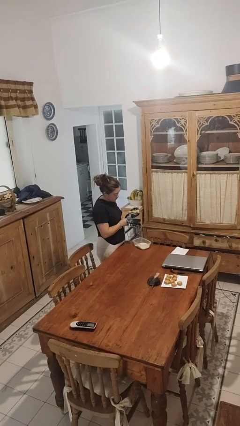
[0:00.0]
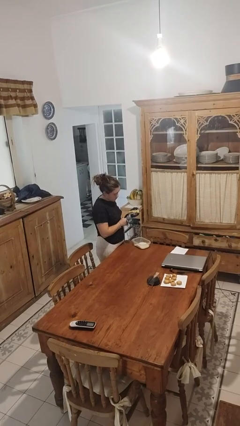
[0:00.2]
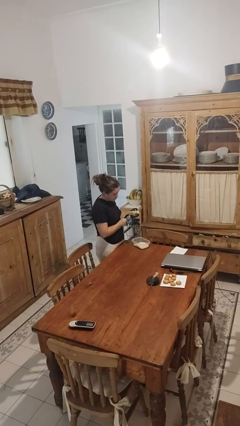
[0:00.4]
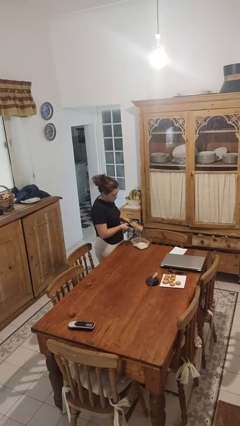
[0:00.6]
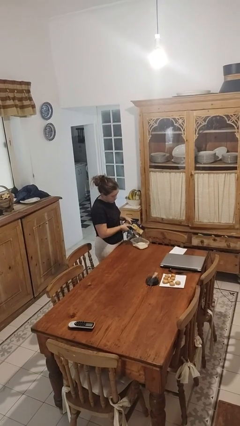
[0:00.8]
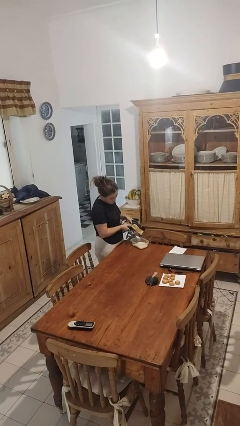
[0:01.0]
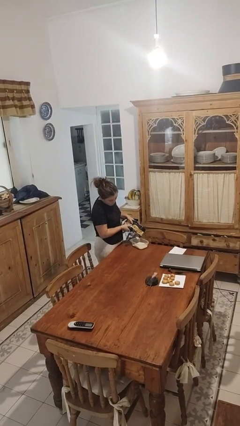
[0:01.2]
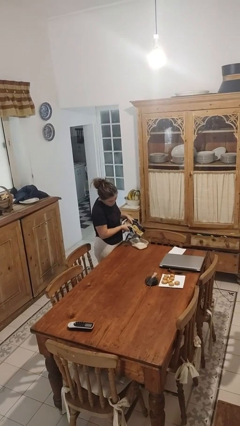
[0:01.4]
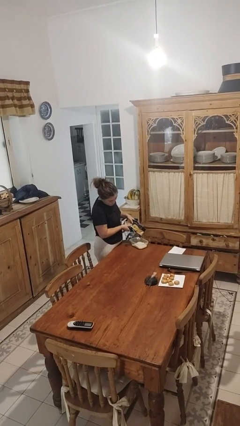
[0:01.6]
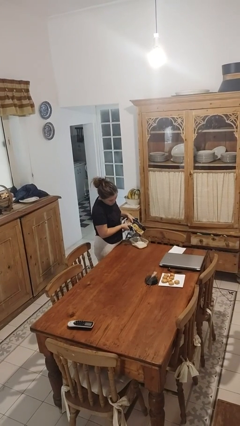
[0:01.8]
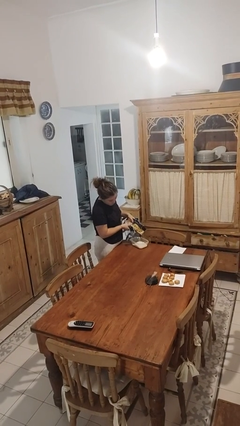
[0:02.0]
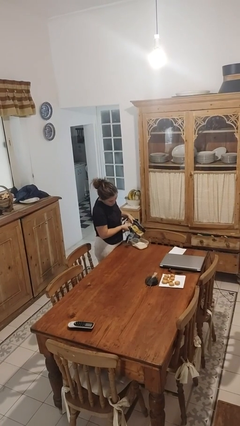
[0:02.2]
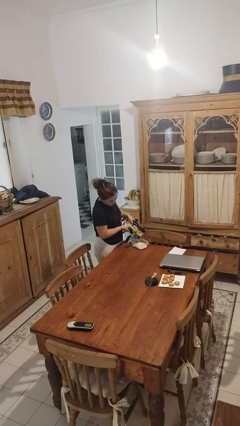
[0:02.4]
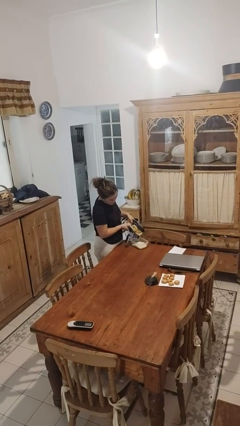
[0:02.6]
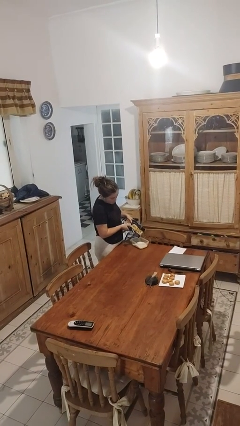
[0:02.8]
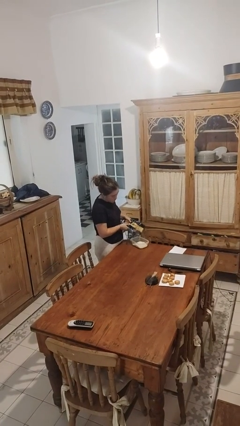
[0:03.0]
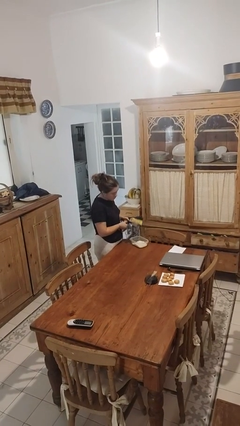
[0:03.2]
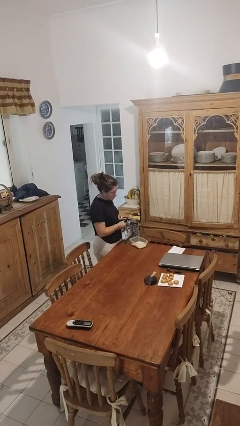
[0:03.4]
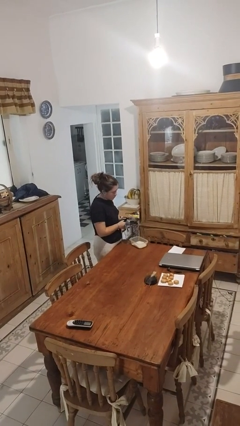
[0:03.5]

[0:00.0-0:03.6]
person pours into bowl

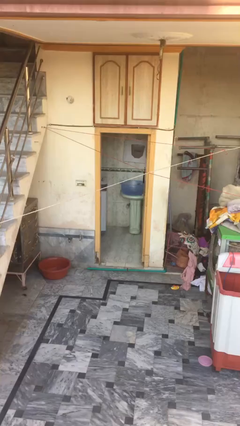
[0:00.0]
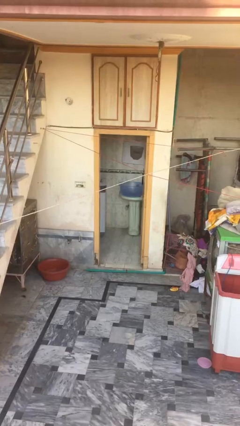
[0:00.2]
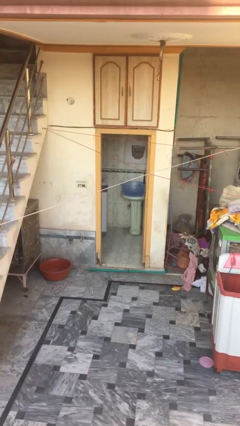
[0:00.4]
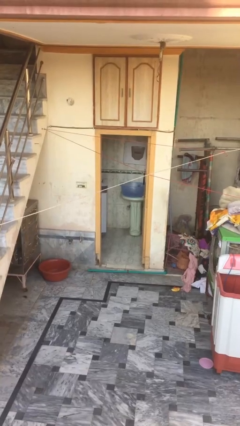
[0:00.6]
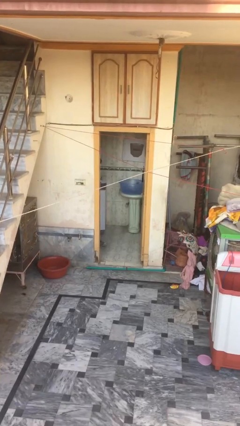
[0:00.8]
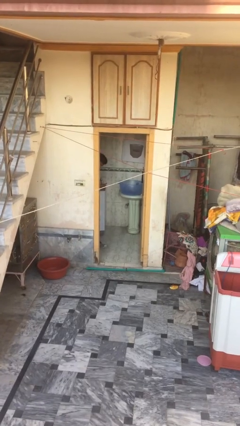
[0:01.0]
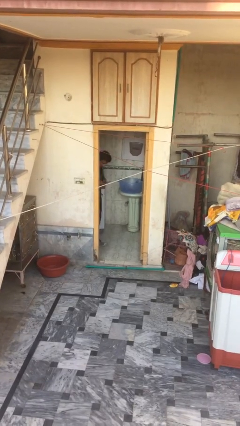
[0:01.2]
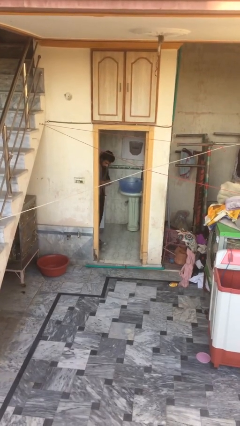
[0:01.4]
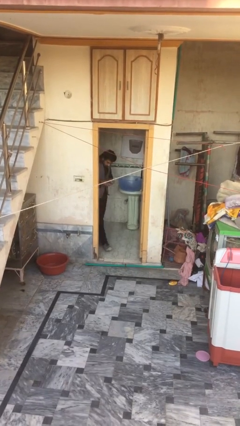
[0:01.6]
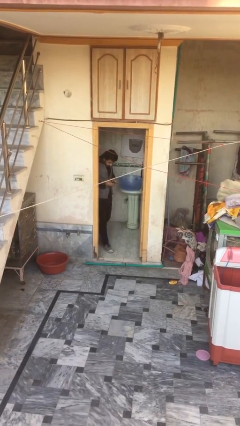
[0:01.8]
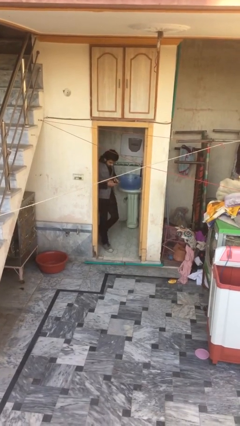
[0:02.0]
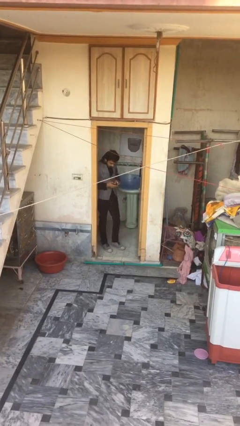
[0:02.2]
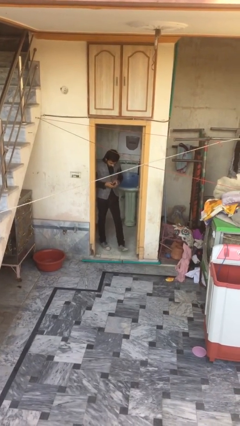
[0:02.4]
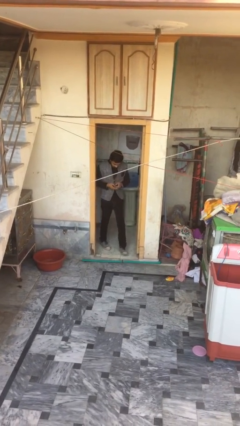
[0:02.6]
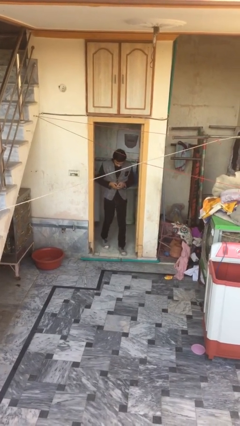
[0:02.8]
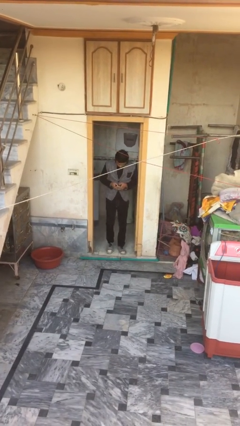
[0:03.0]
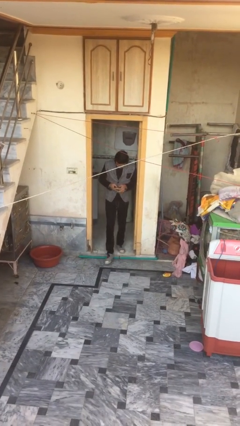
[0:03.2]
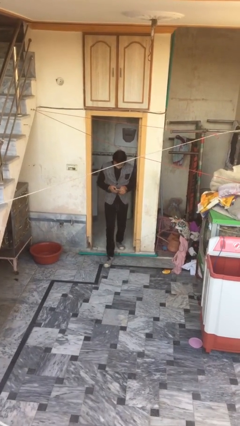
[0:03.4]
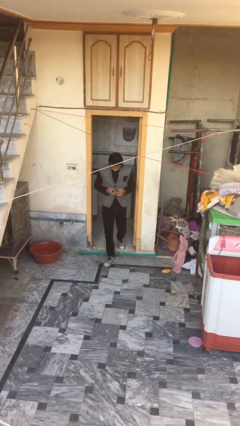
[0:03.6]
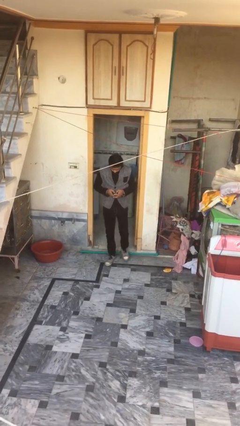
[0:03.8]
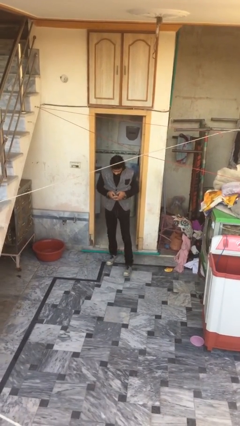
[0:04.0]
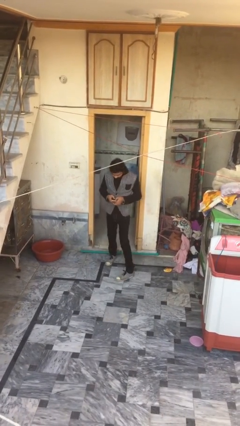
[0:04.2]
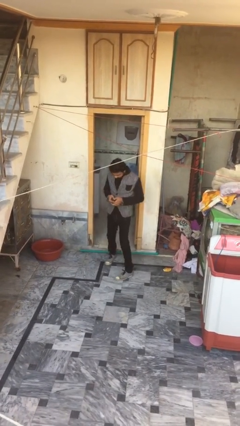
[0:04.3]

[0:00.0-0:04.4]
person enters scene through structure

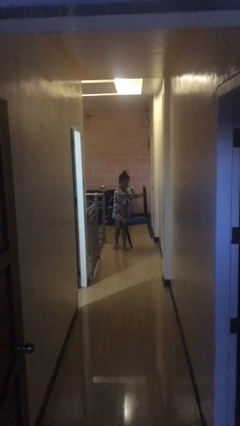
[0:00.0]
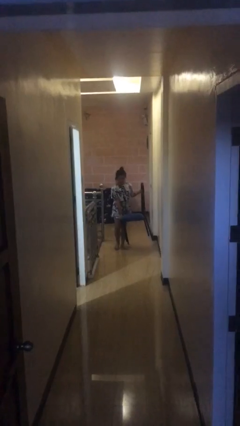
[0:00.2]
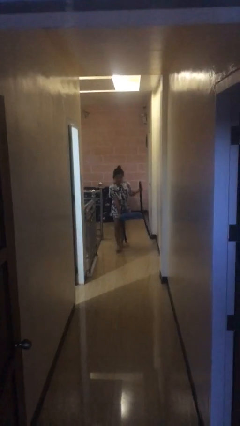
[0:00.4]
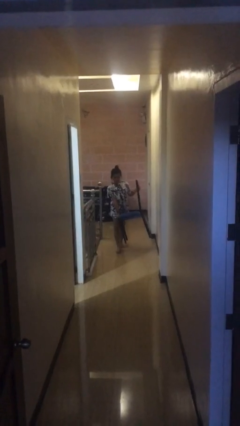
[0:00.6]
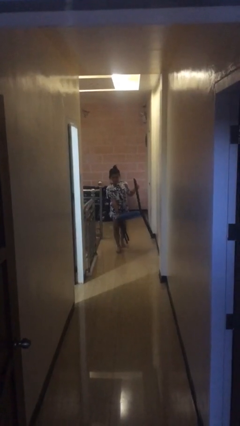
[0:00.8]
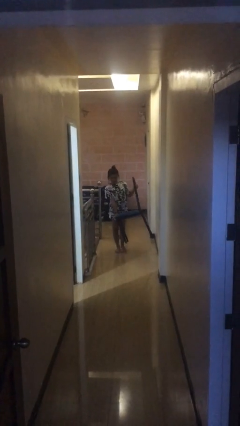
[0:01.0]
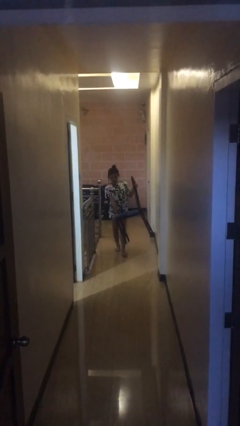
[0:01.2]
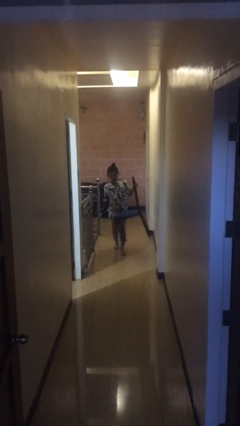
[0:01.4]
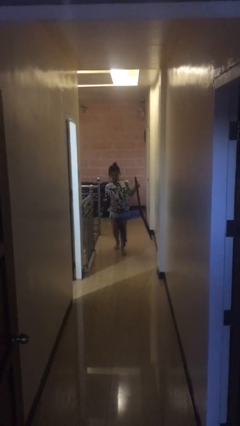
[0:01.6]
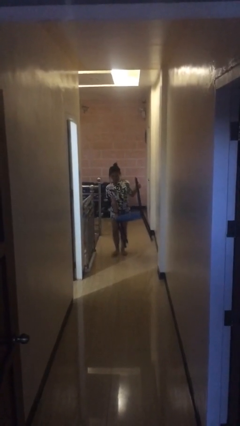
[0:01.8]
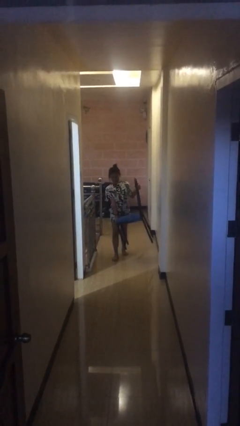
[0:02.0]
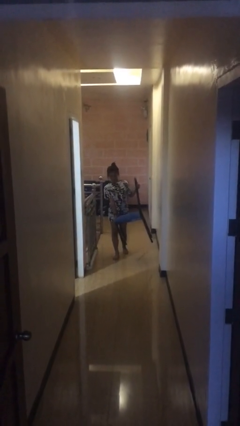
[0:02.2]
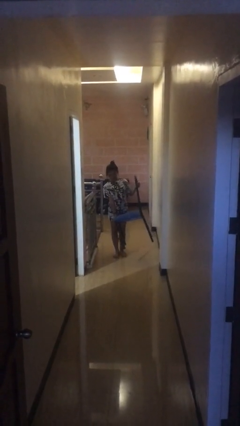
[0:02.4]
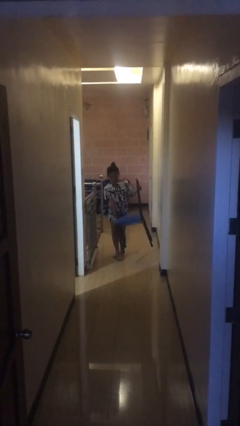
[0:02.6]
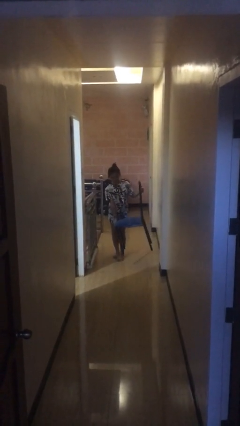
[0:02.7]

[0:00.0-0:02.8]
person carries heavy object

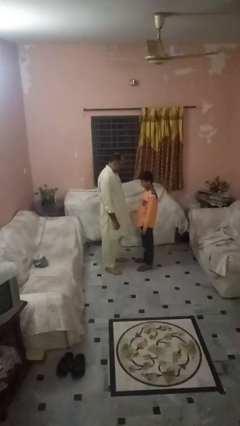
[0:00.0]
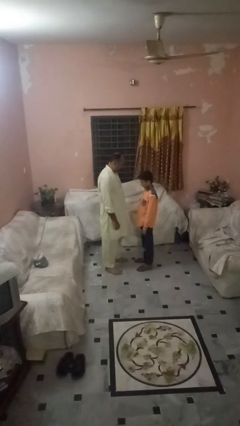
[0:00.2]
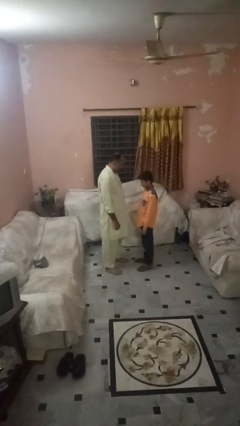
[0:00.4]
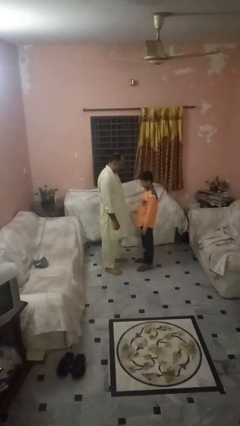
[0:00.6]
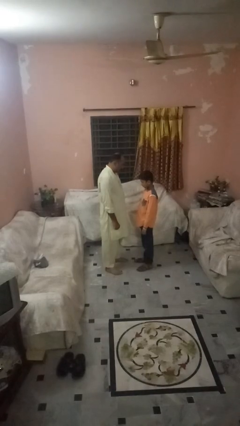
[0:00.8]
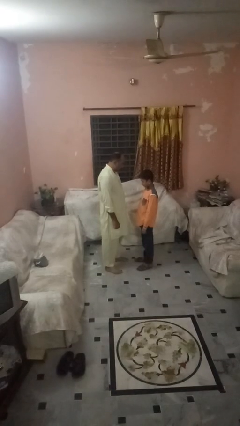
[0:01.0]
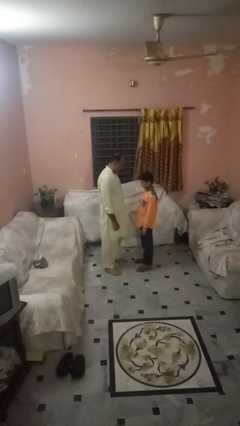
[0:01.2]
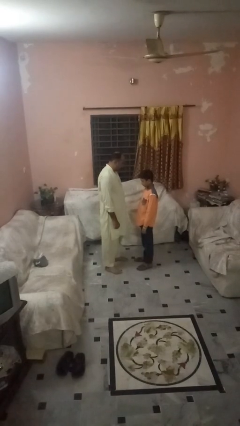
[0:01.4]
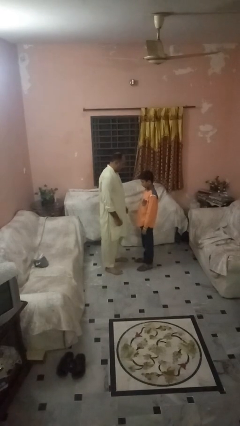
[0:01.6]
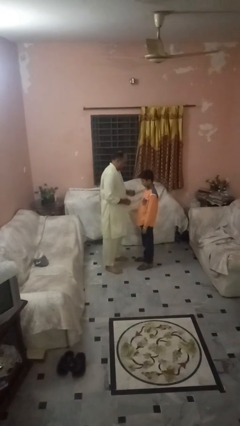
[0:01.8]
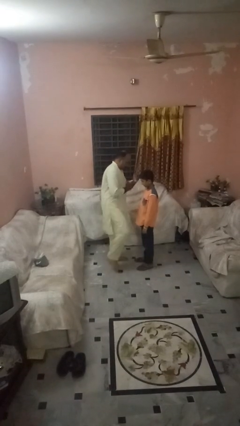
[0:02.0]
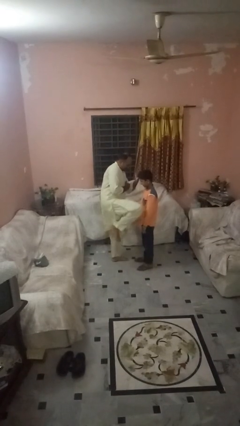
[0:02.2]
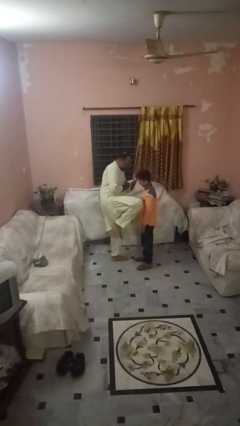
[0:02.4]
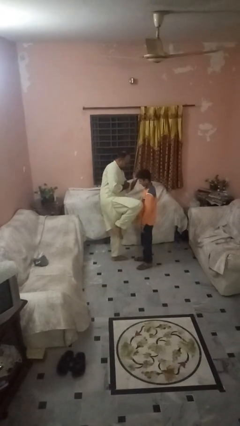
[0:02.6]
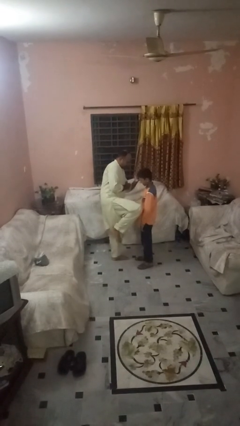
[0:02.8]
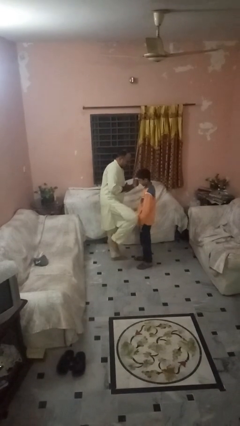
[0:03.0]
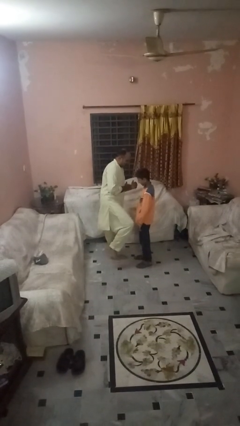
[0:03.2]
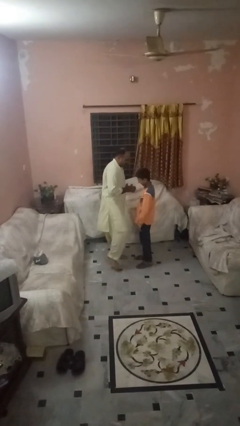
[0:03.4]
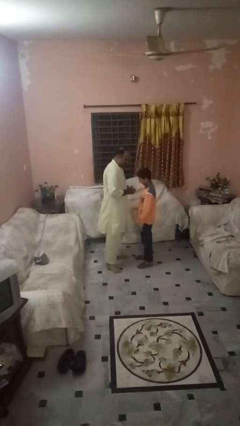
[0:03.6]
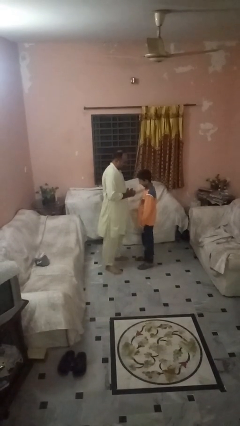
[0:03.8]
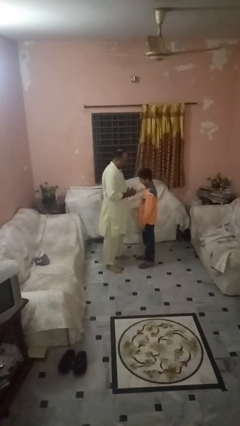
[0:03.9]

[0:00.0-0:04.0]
person kicks object to person

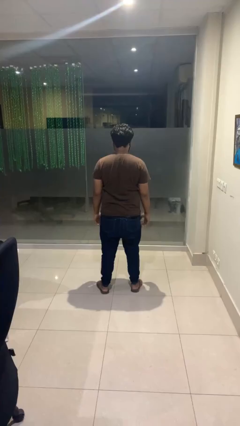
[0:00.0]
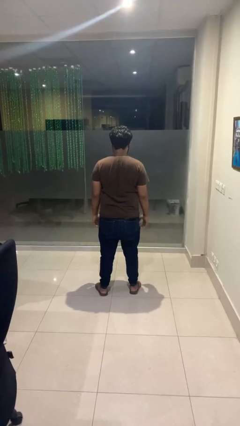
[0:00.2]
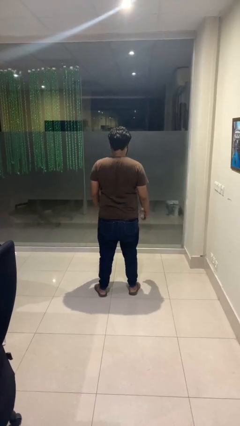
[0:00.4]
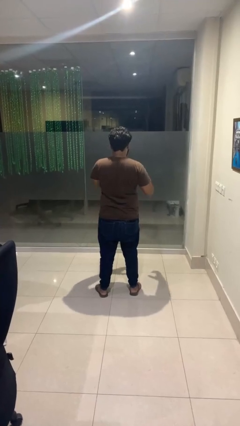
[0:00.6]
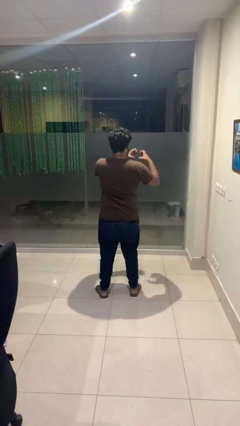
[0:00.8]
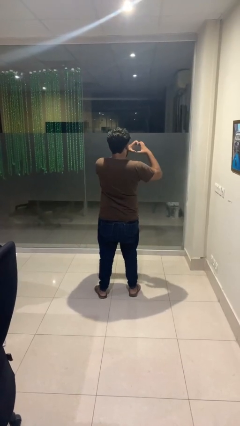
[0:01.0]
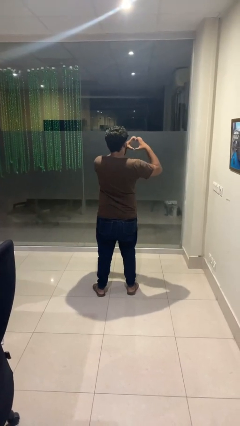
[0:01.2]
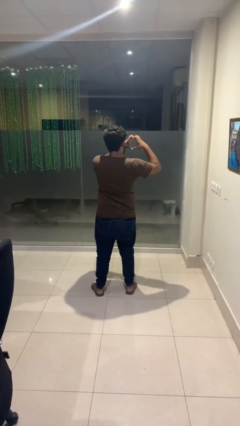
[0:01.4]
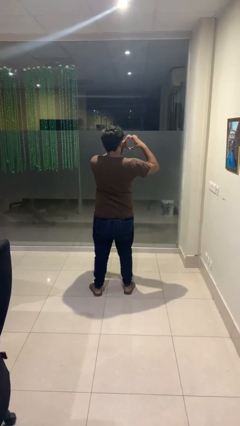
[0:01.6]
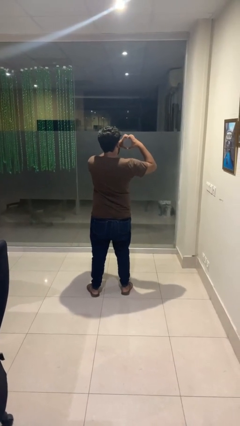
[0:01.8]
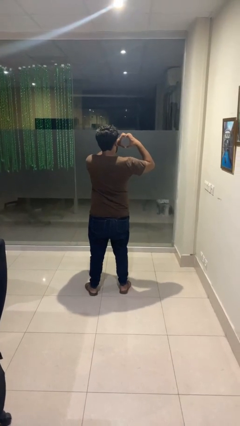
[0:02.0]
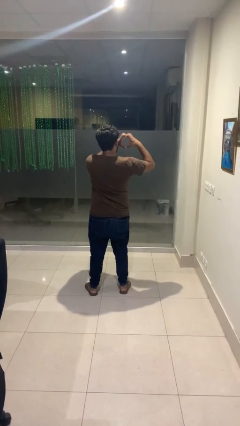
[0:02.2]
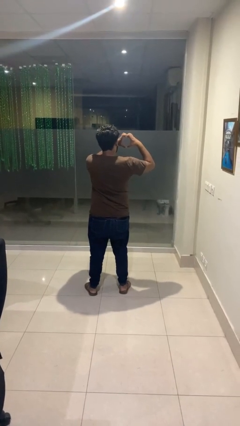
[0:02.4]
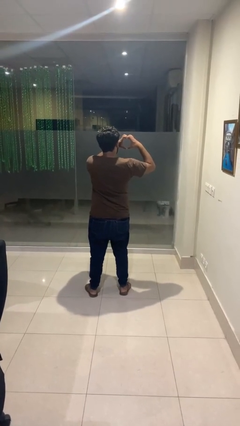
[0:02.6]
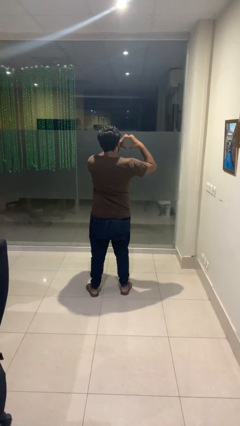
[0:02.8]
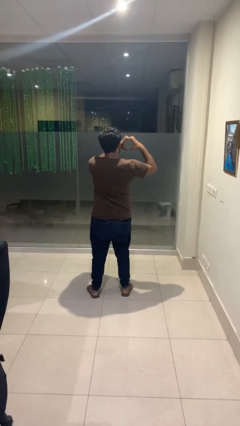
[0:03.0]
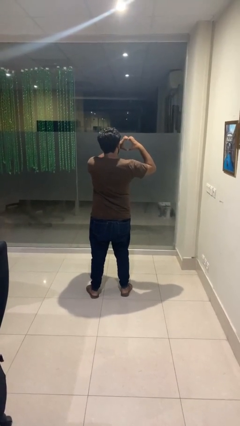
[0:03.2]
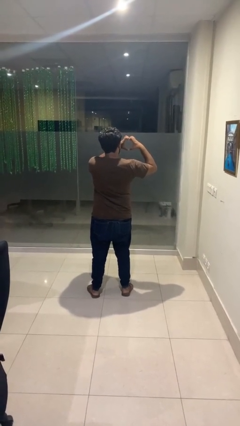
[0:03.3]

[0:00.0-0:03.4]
person gestures heart
